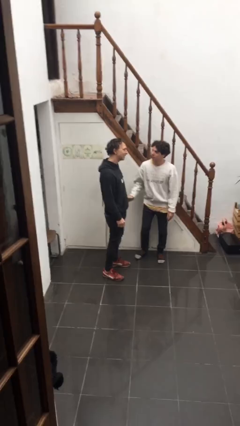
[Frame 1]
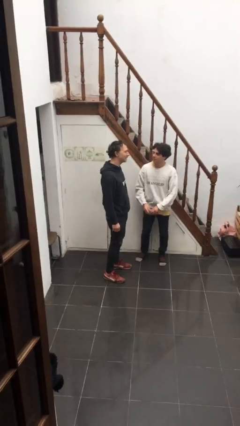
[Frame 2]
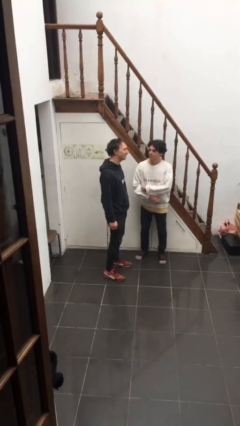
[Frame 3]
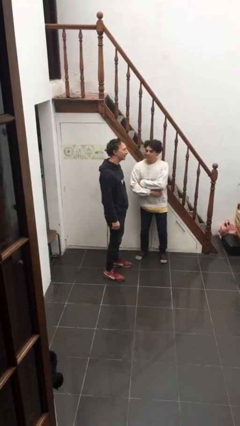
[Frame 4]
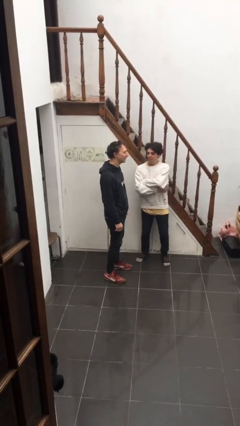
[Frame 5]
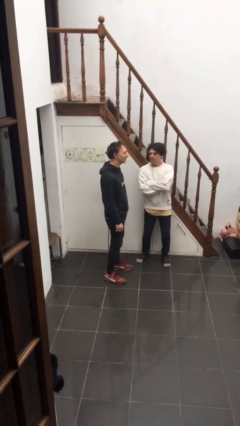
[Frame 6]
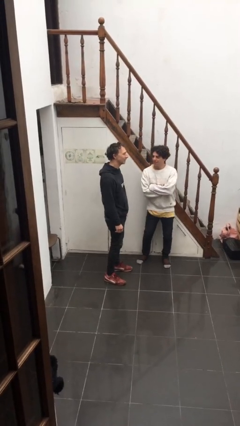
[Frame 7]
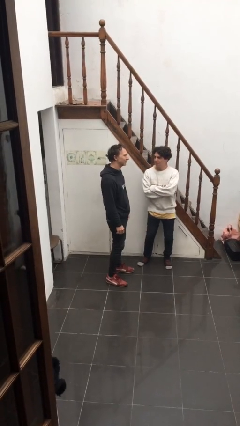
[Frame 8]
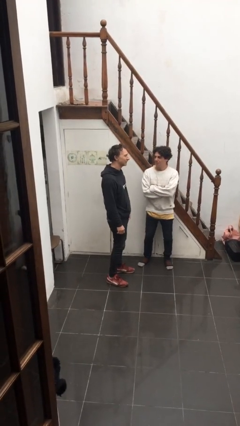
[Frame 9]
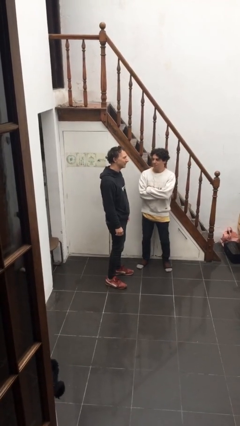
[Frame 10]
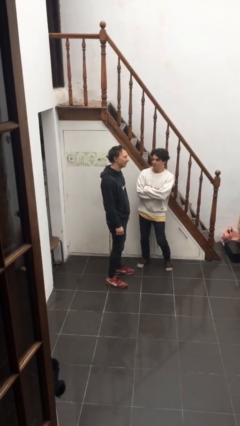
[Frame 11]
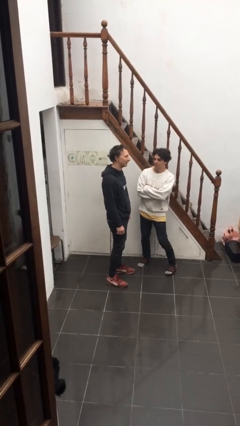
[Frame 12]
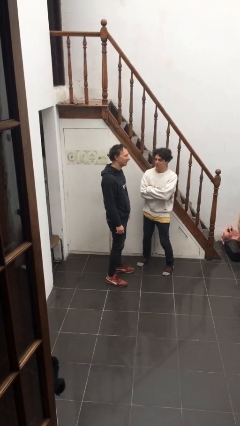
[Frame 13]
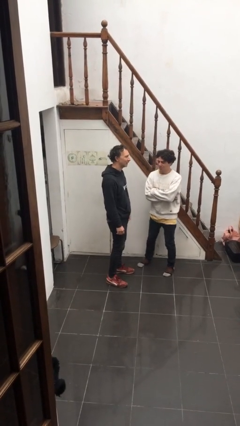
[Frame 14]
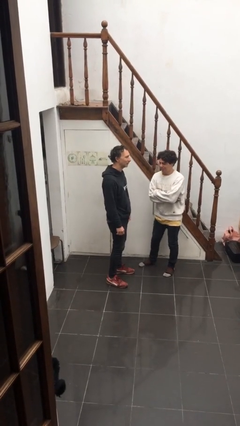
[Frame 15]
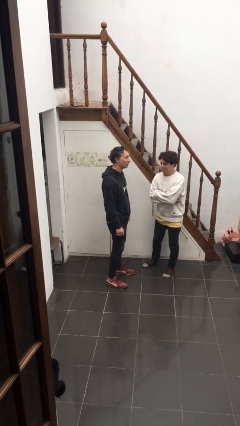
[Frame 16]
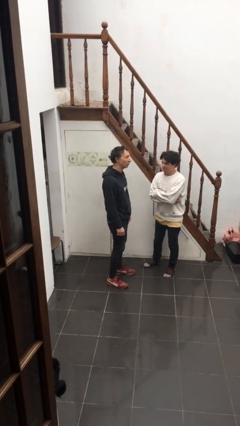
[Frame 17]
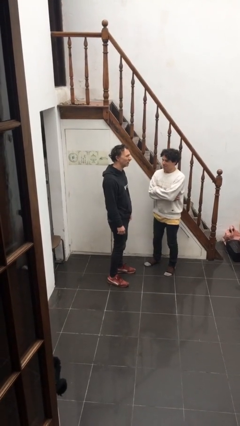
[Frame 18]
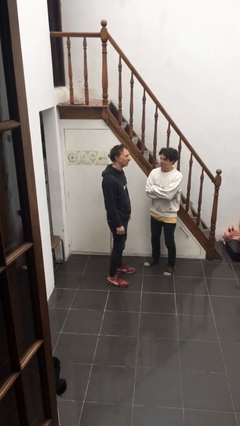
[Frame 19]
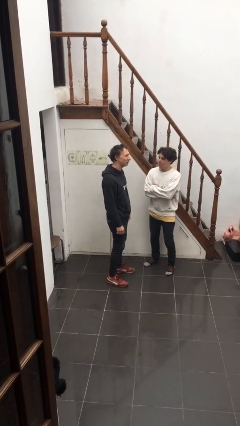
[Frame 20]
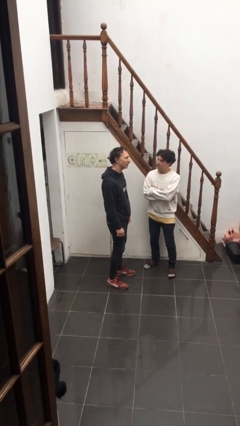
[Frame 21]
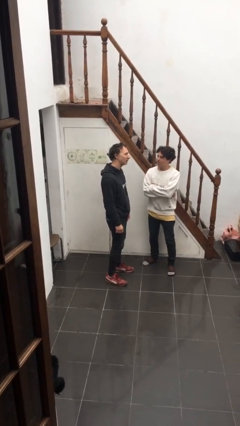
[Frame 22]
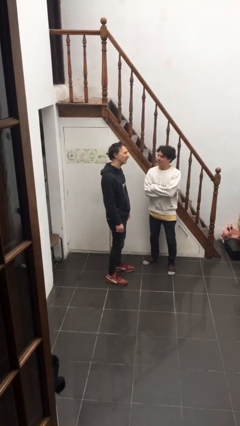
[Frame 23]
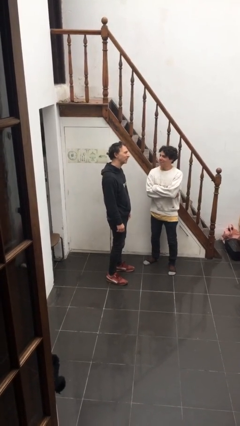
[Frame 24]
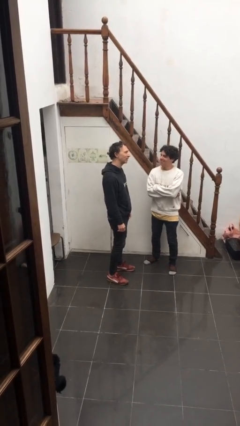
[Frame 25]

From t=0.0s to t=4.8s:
person talks to person

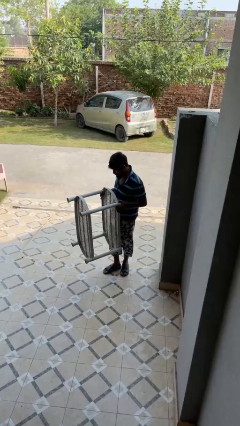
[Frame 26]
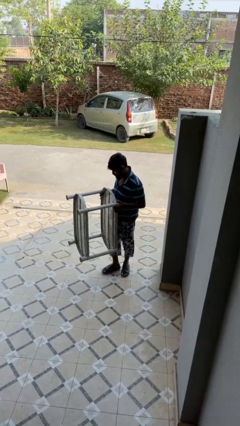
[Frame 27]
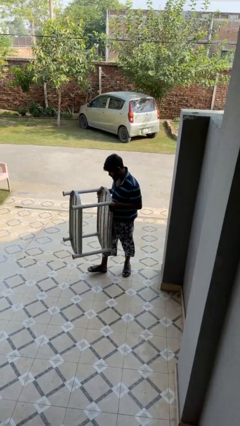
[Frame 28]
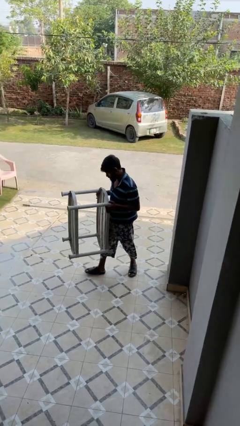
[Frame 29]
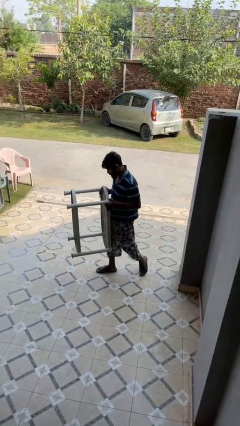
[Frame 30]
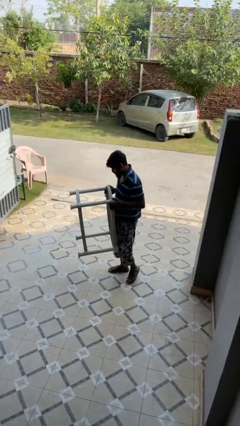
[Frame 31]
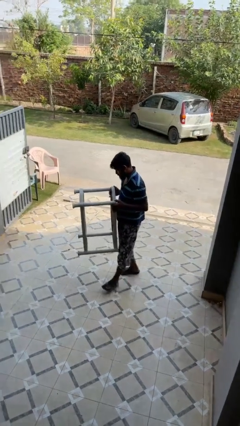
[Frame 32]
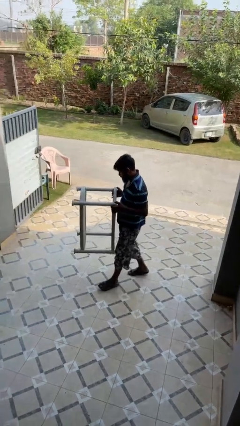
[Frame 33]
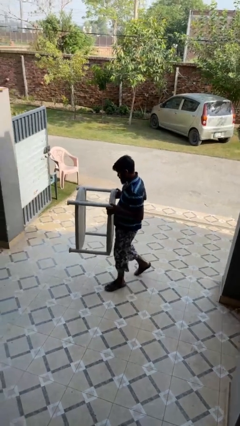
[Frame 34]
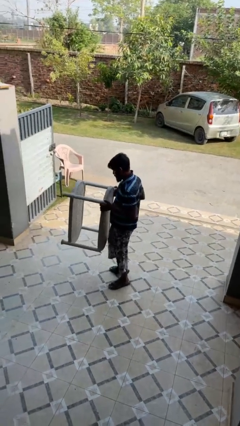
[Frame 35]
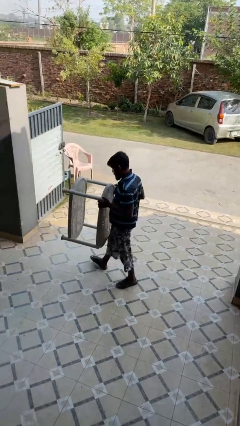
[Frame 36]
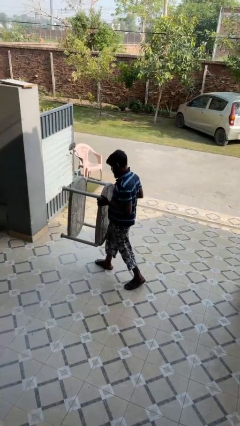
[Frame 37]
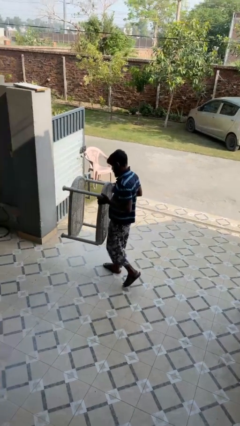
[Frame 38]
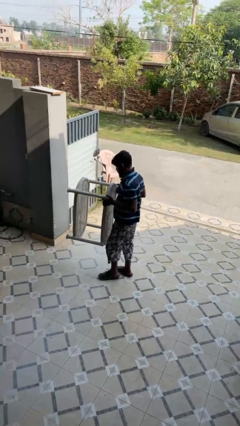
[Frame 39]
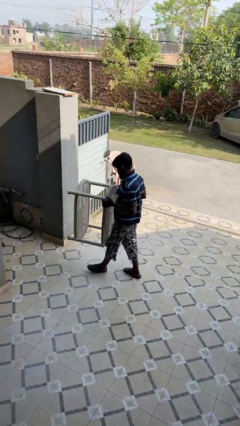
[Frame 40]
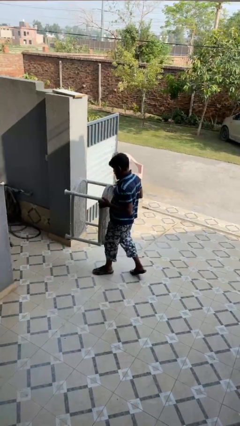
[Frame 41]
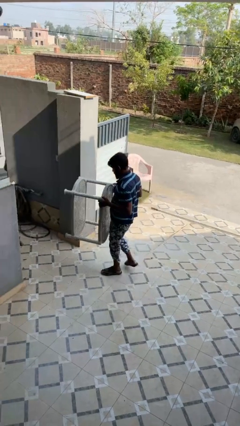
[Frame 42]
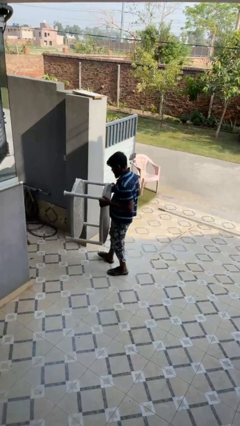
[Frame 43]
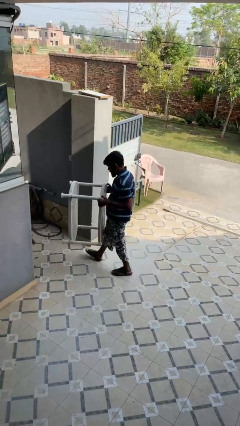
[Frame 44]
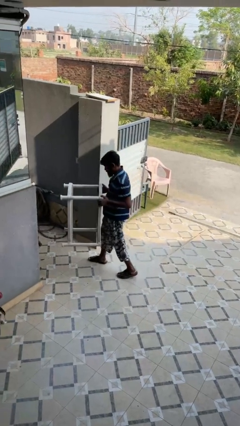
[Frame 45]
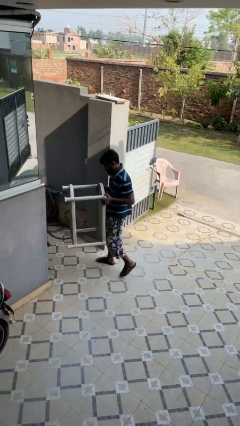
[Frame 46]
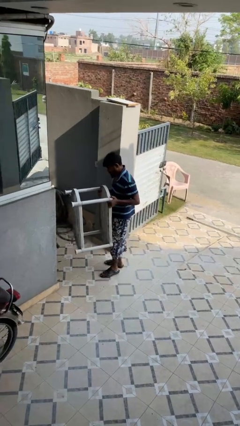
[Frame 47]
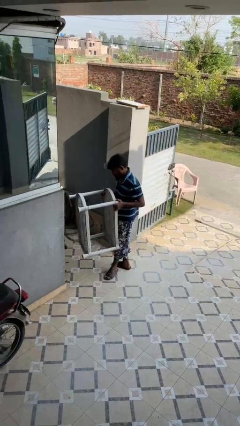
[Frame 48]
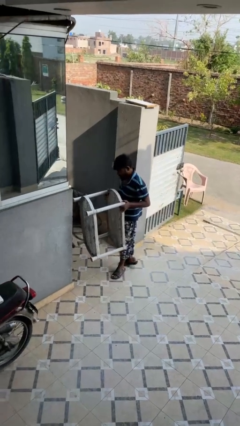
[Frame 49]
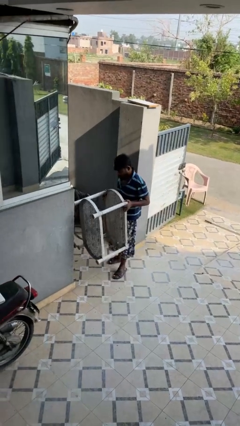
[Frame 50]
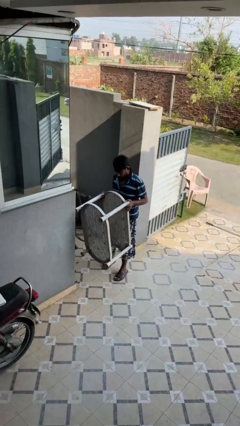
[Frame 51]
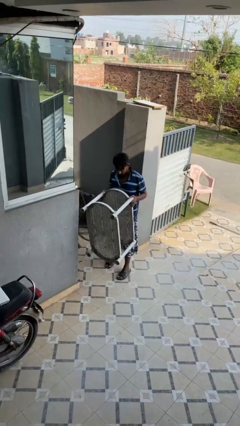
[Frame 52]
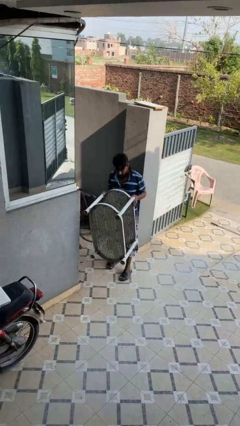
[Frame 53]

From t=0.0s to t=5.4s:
person carries furniture

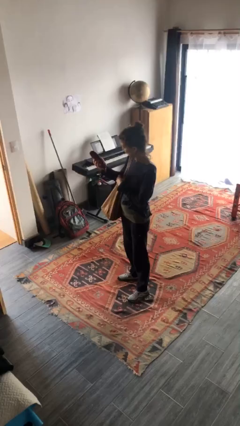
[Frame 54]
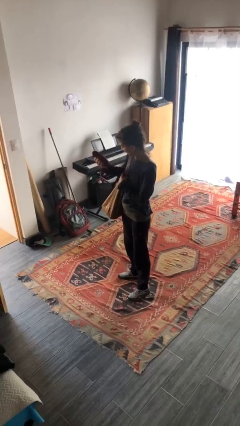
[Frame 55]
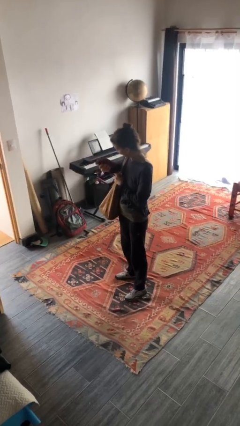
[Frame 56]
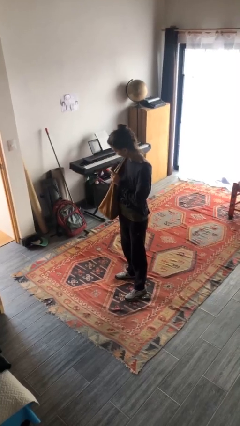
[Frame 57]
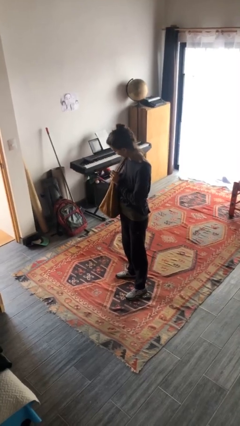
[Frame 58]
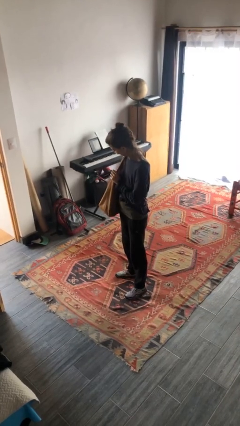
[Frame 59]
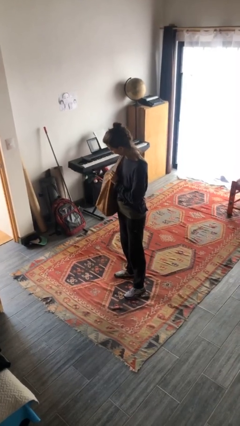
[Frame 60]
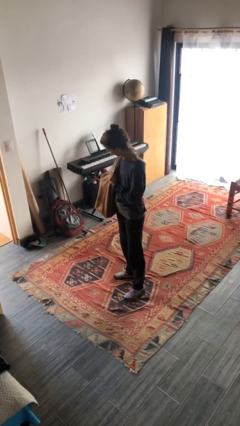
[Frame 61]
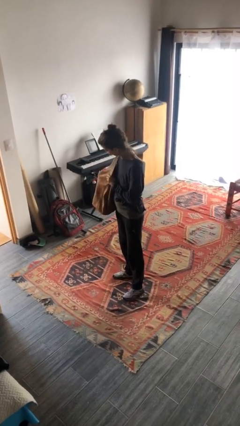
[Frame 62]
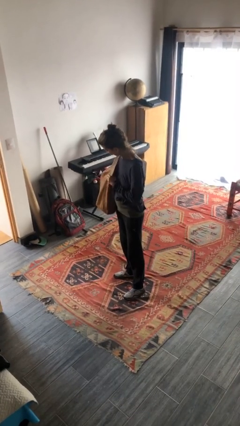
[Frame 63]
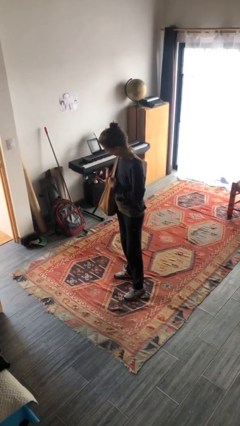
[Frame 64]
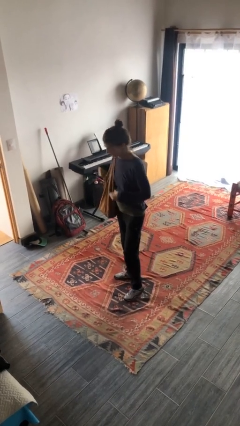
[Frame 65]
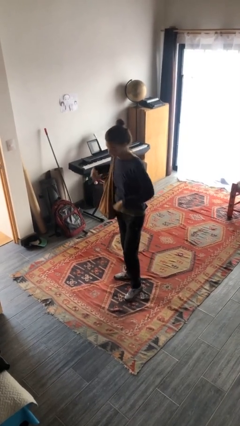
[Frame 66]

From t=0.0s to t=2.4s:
person puts object into purse

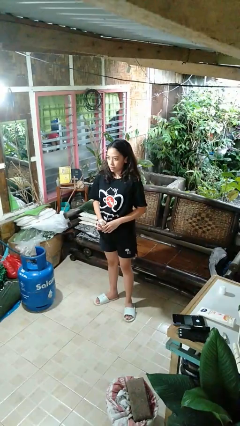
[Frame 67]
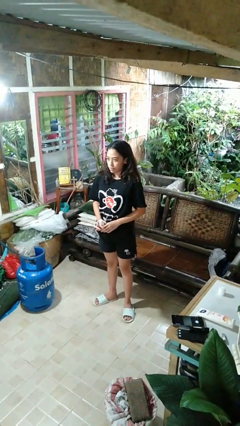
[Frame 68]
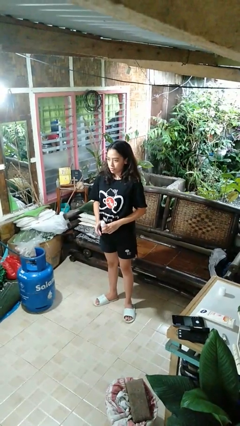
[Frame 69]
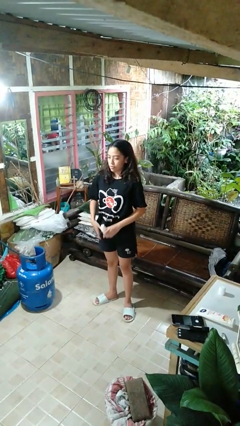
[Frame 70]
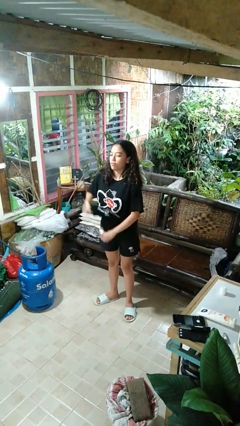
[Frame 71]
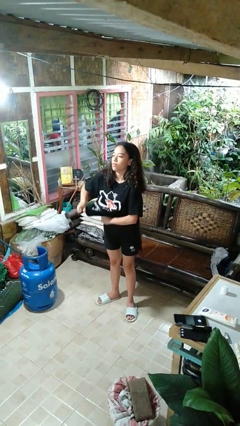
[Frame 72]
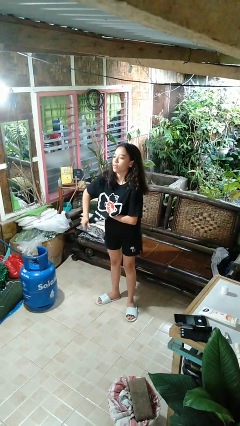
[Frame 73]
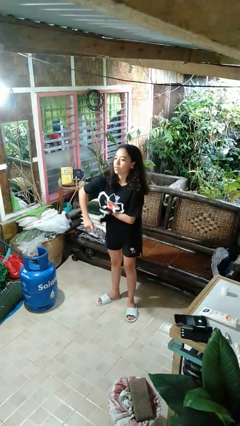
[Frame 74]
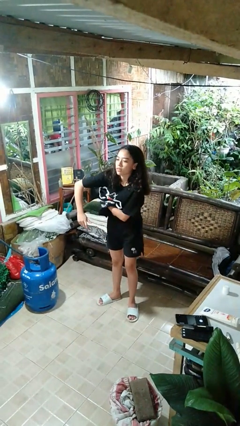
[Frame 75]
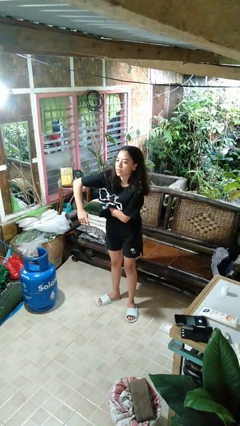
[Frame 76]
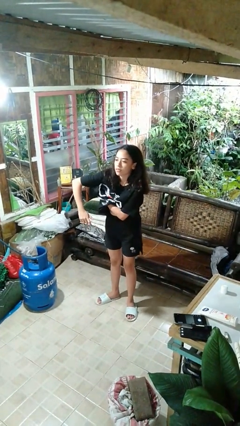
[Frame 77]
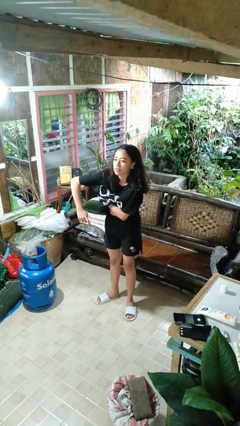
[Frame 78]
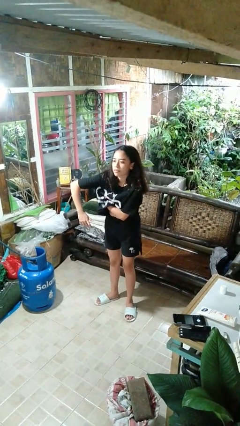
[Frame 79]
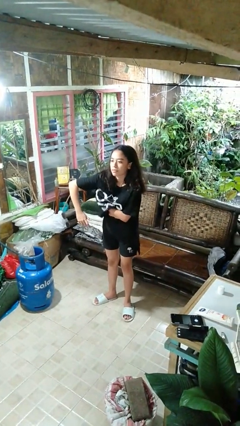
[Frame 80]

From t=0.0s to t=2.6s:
person applies deodorant

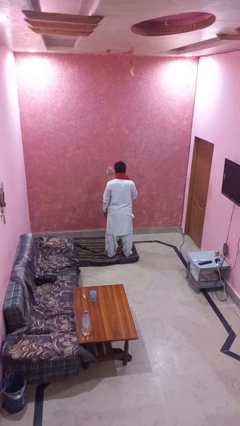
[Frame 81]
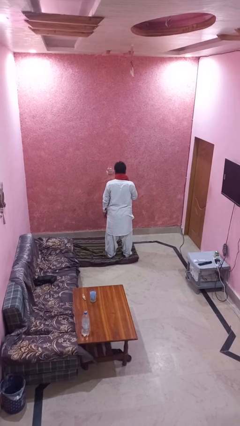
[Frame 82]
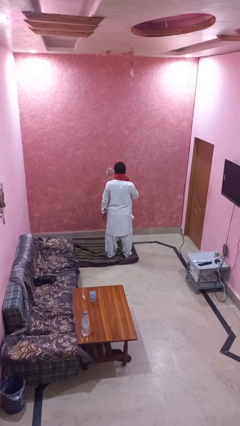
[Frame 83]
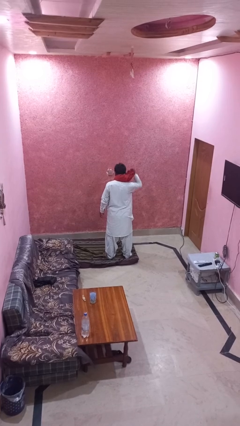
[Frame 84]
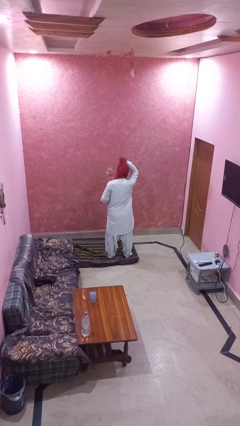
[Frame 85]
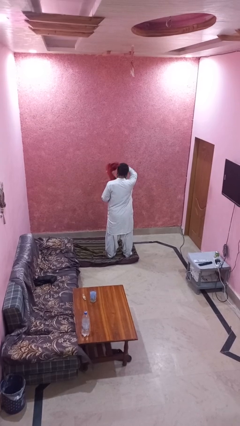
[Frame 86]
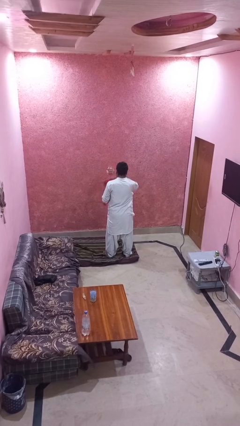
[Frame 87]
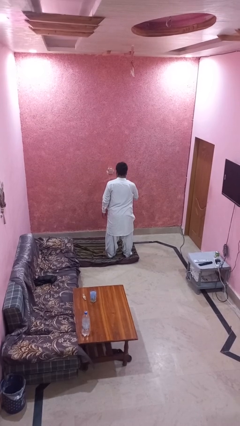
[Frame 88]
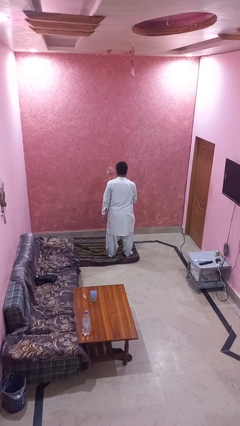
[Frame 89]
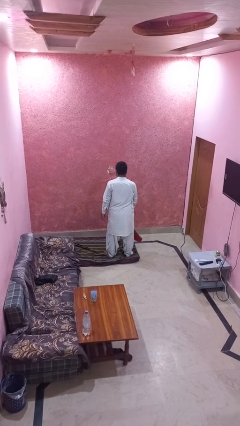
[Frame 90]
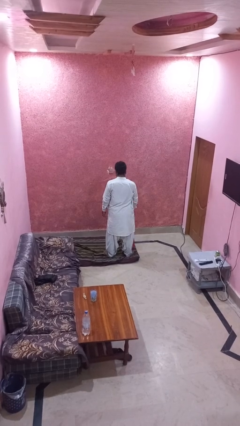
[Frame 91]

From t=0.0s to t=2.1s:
person takes off scarf

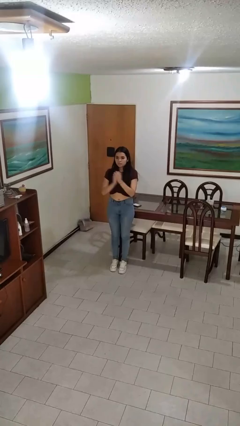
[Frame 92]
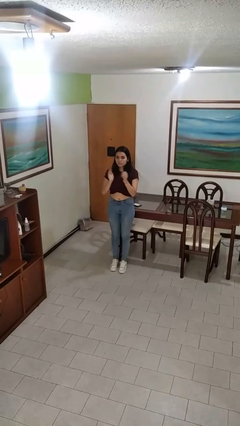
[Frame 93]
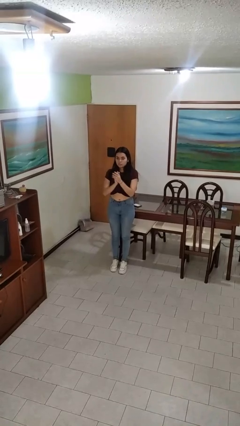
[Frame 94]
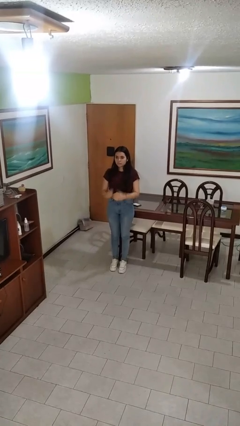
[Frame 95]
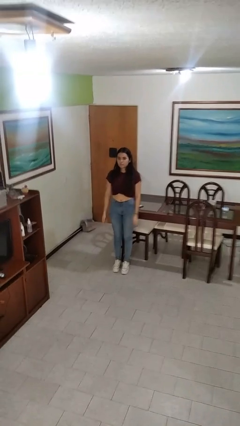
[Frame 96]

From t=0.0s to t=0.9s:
person claps hands
